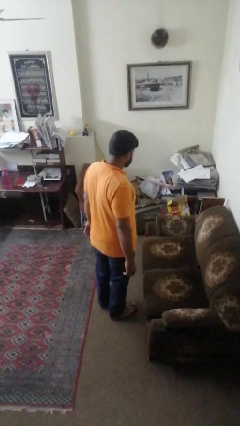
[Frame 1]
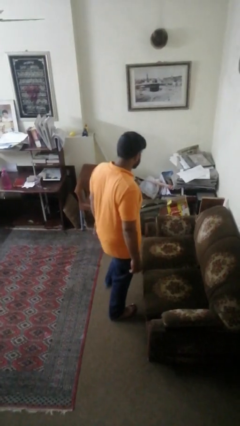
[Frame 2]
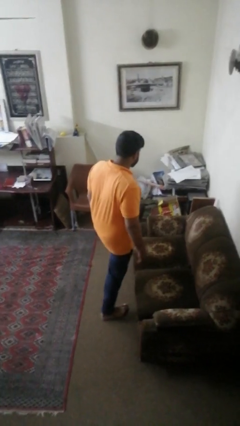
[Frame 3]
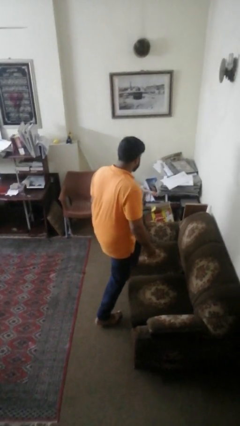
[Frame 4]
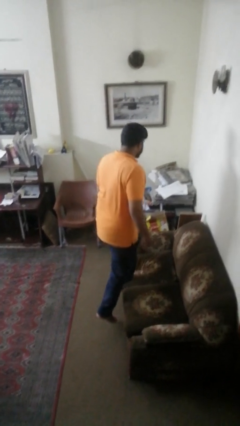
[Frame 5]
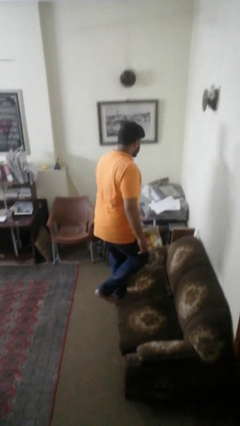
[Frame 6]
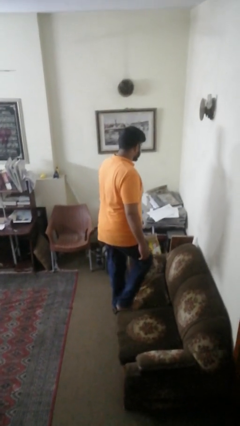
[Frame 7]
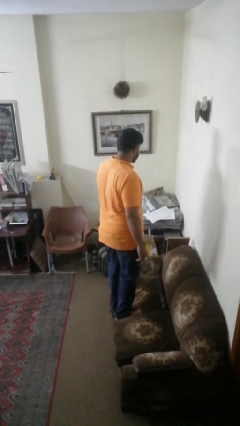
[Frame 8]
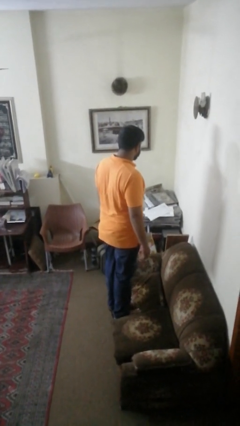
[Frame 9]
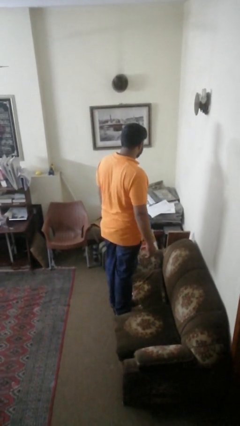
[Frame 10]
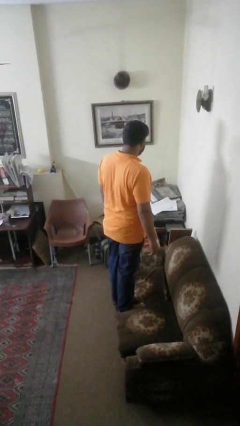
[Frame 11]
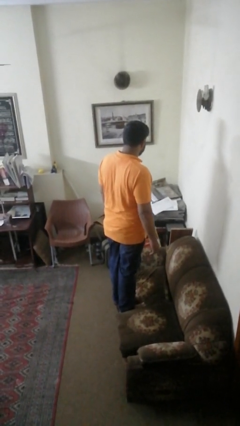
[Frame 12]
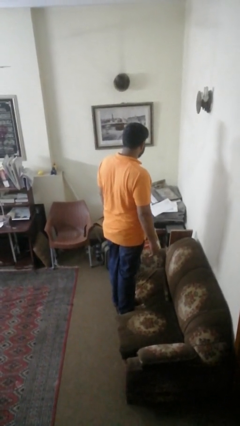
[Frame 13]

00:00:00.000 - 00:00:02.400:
person climbs on couch

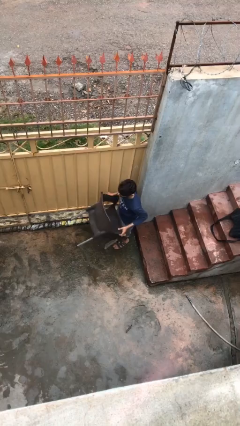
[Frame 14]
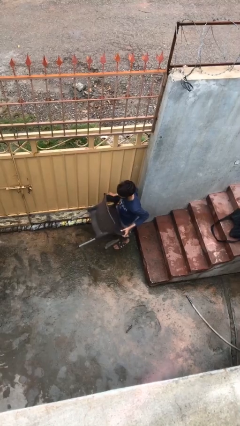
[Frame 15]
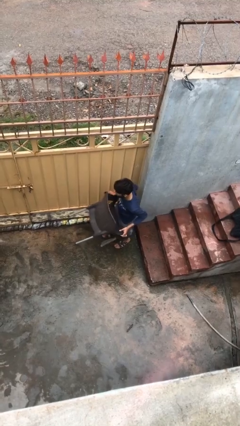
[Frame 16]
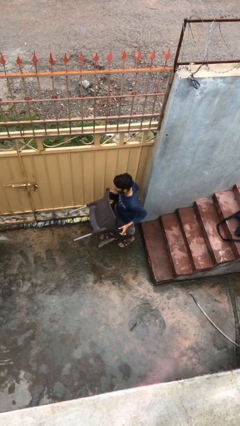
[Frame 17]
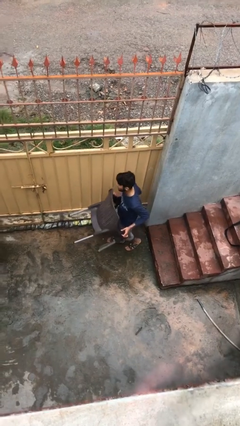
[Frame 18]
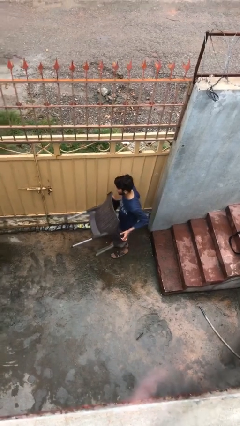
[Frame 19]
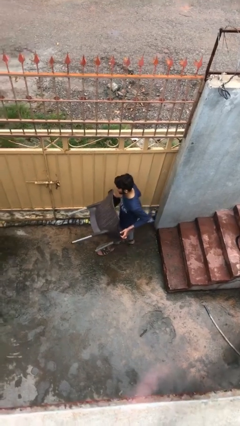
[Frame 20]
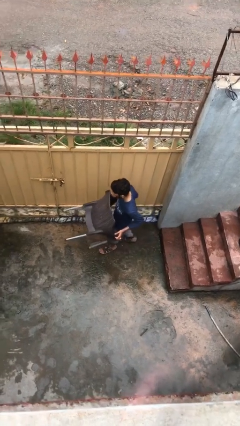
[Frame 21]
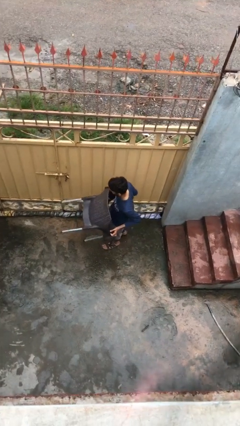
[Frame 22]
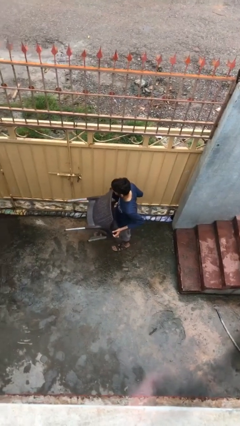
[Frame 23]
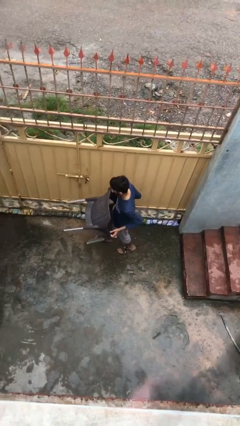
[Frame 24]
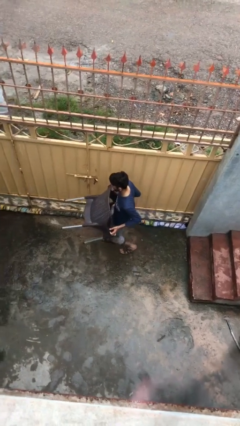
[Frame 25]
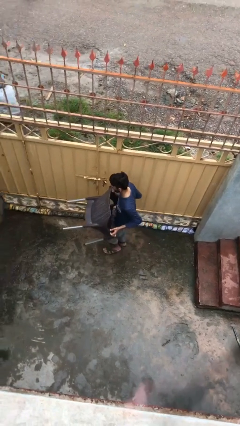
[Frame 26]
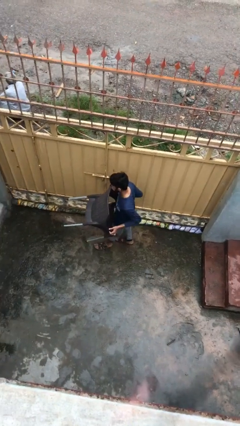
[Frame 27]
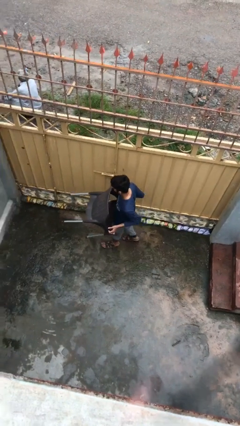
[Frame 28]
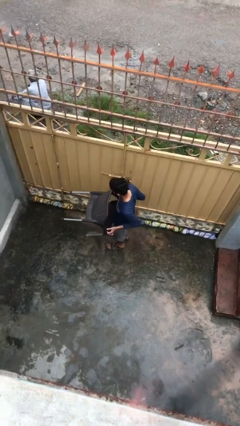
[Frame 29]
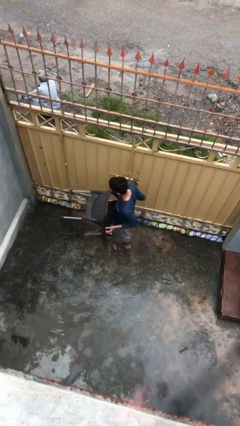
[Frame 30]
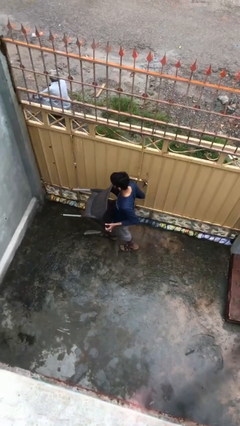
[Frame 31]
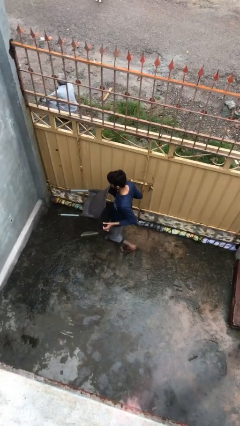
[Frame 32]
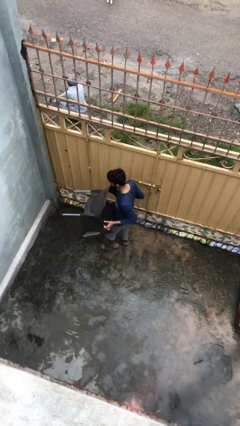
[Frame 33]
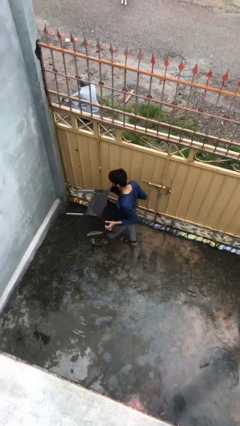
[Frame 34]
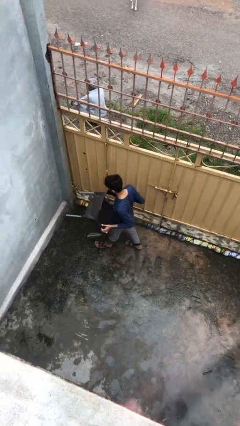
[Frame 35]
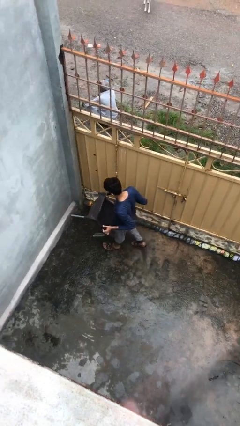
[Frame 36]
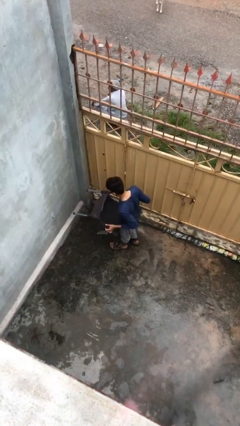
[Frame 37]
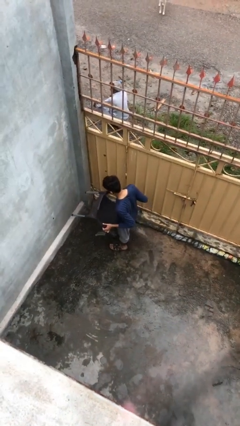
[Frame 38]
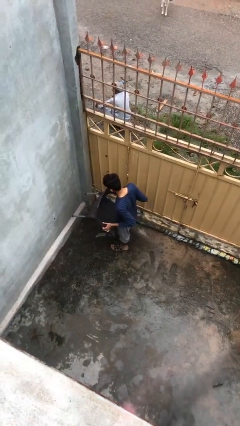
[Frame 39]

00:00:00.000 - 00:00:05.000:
person carries heavy object

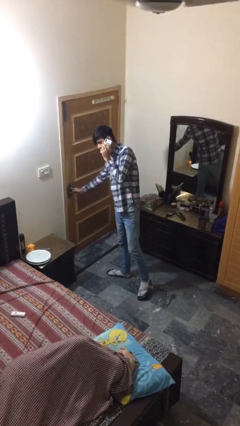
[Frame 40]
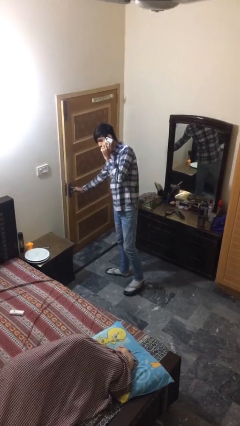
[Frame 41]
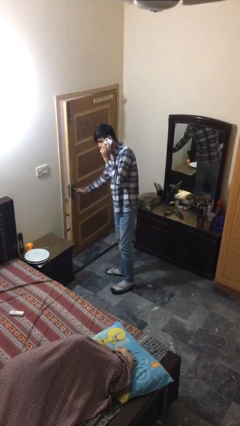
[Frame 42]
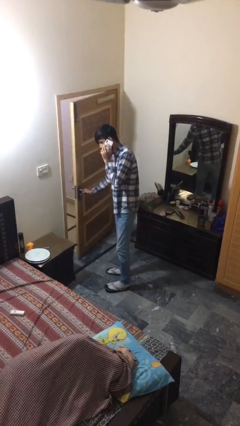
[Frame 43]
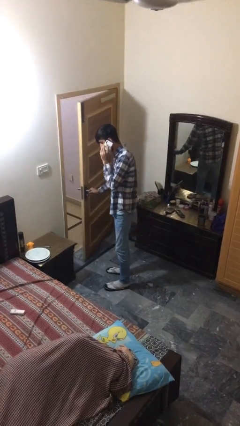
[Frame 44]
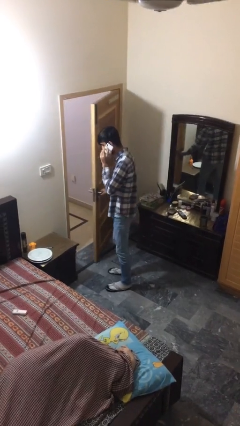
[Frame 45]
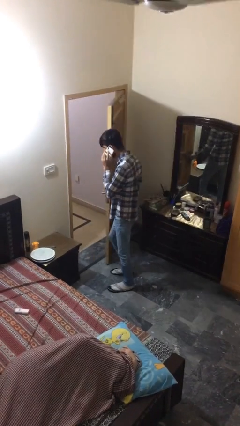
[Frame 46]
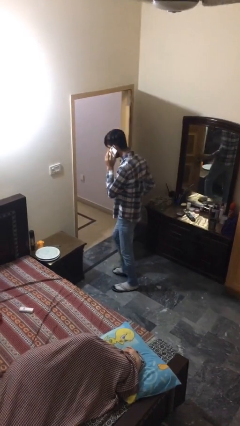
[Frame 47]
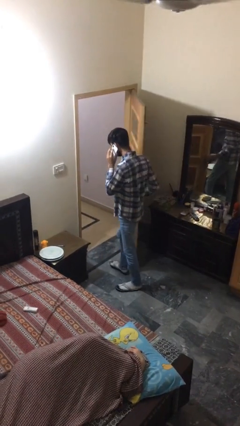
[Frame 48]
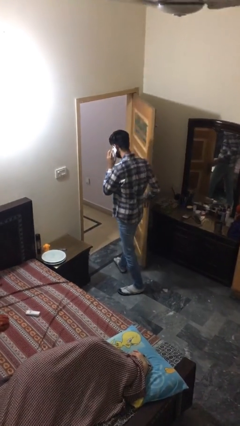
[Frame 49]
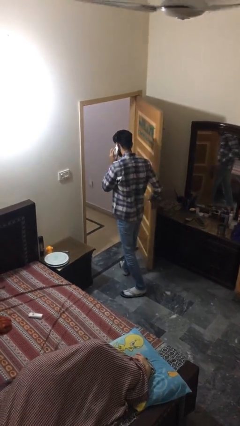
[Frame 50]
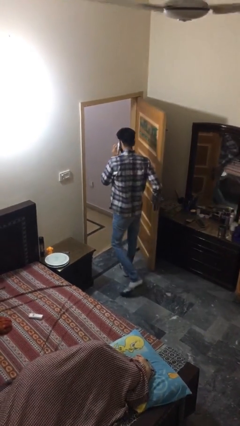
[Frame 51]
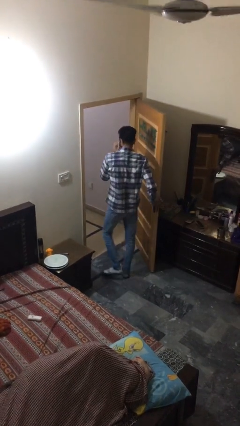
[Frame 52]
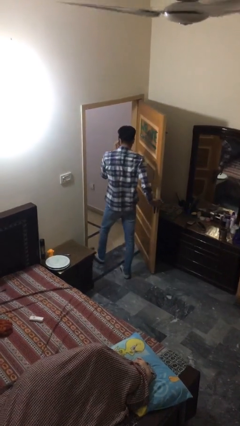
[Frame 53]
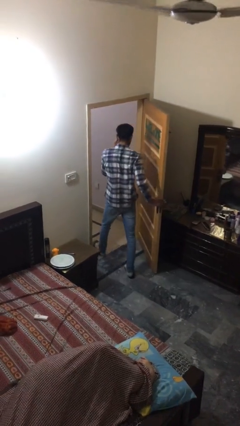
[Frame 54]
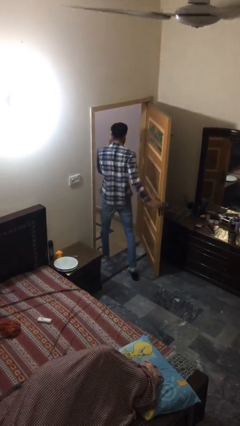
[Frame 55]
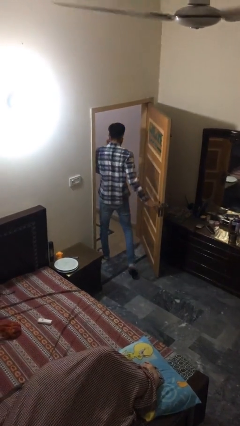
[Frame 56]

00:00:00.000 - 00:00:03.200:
person exits scene through structure

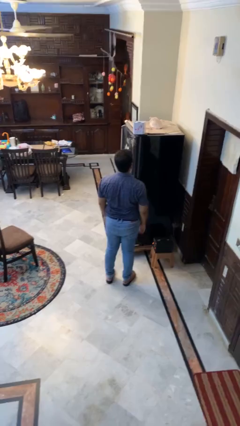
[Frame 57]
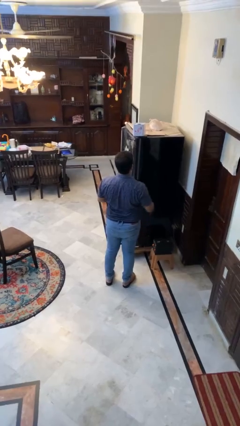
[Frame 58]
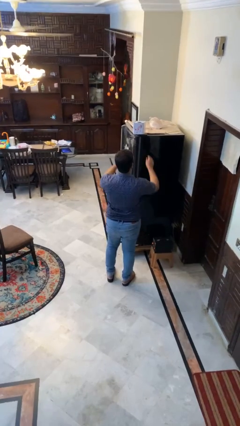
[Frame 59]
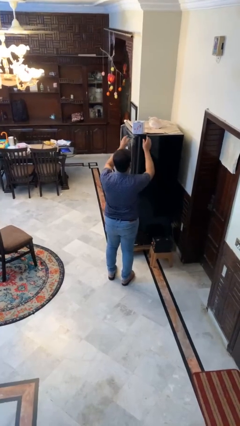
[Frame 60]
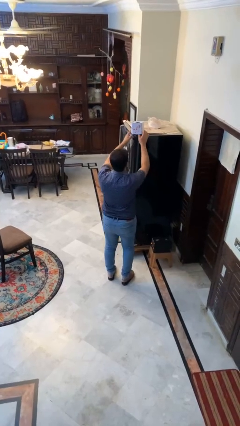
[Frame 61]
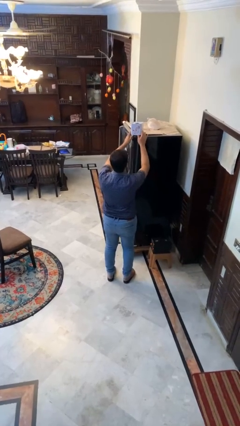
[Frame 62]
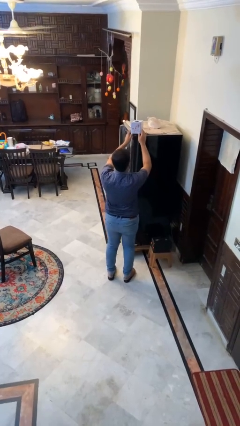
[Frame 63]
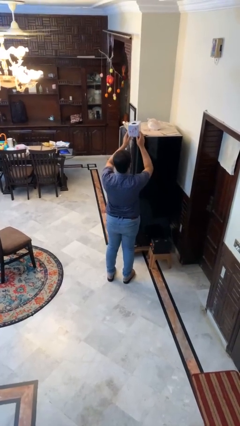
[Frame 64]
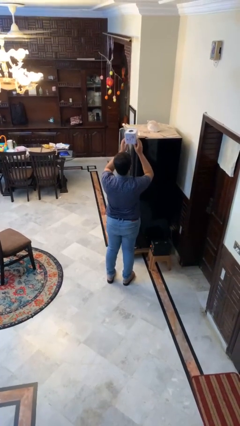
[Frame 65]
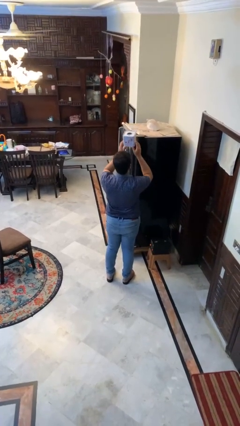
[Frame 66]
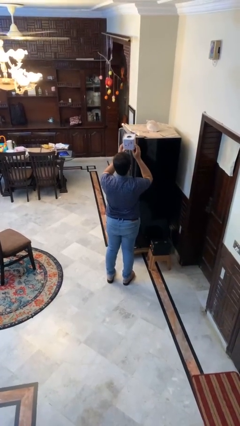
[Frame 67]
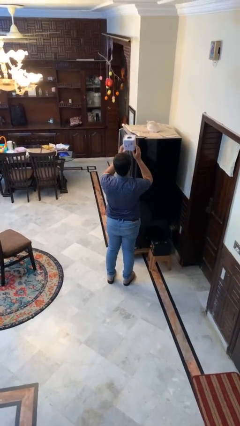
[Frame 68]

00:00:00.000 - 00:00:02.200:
person picks up object from shelf

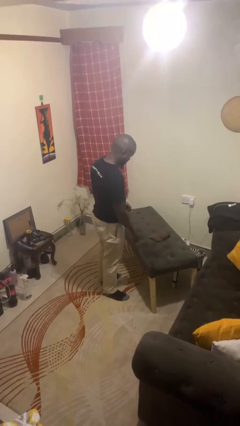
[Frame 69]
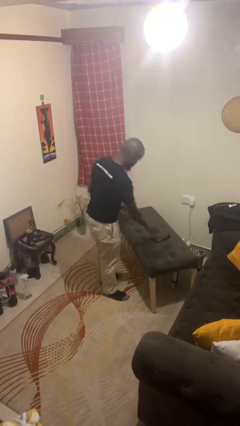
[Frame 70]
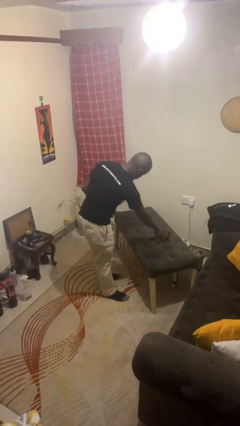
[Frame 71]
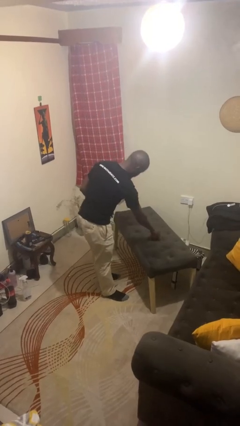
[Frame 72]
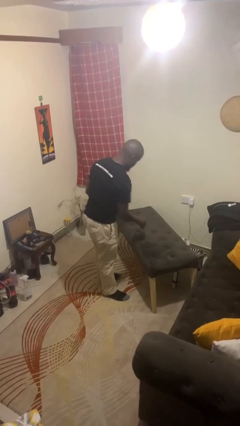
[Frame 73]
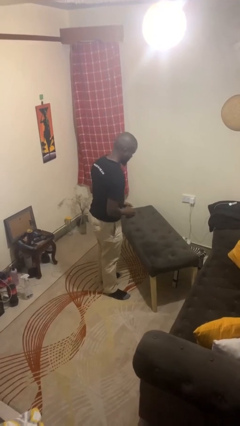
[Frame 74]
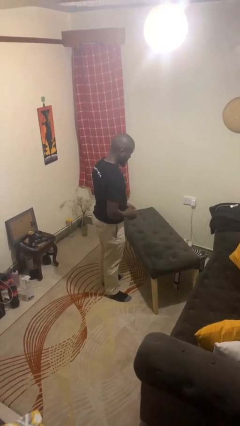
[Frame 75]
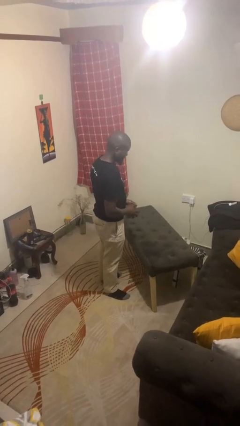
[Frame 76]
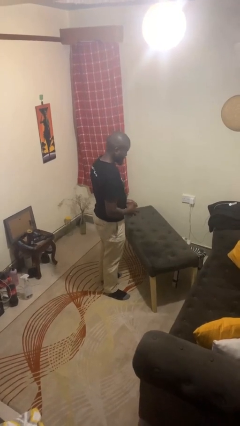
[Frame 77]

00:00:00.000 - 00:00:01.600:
person picks up object from table

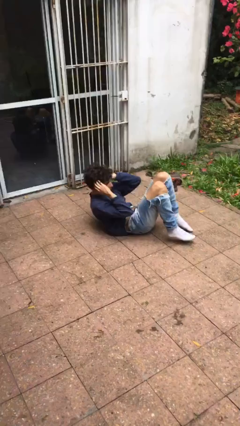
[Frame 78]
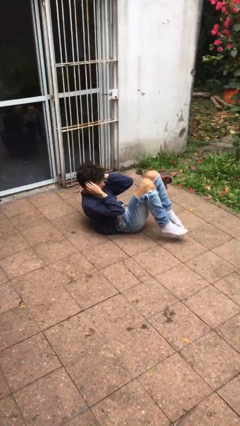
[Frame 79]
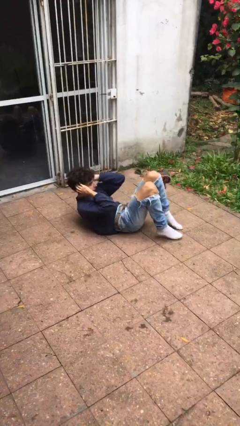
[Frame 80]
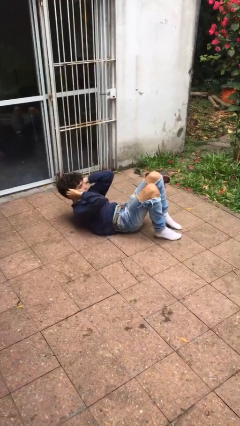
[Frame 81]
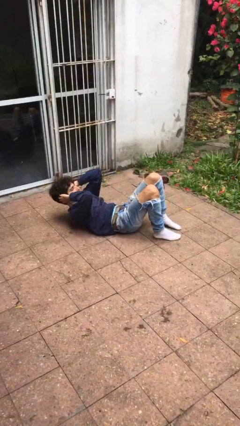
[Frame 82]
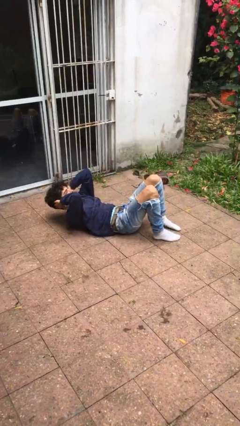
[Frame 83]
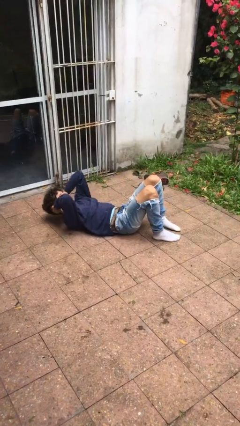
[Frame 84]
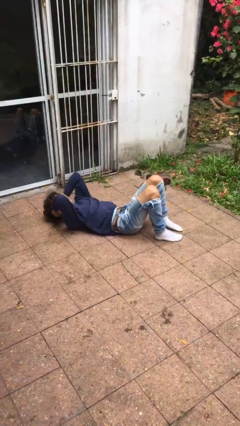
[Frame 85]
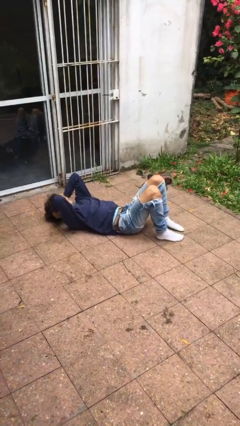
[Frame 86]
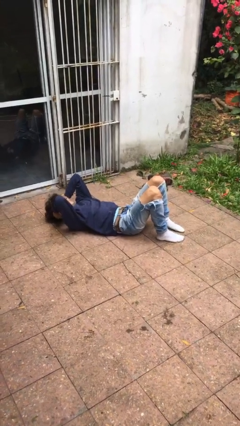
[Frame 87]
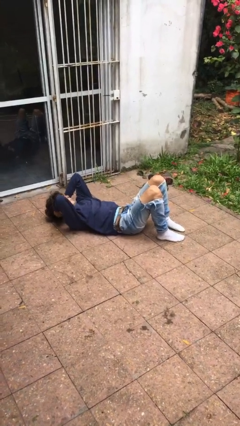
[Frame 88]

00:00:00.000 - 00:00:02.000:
person exercises with situp

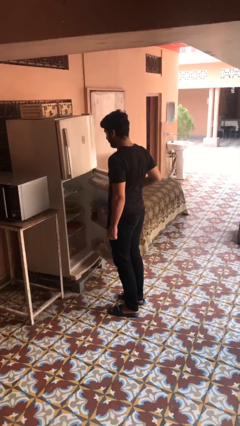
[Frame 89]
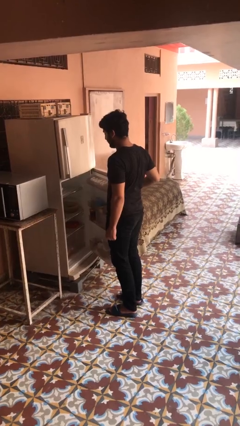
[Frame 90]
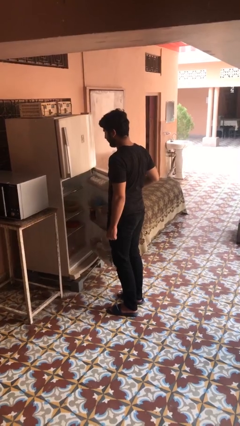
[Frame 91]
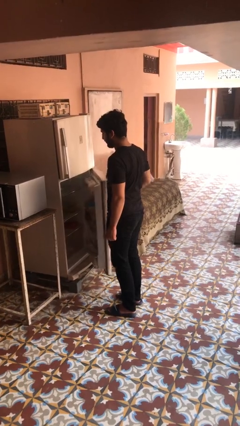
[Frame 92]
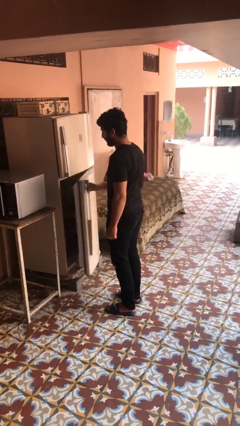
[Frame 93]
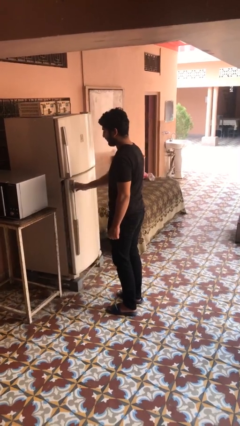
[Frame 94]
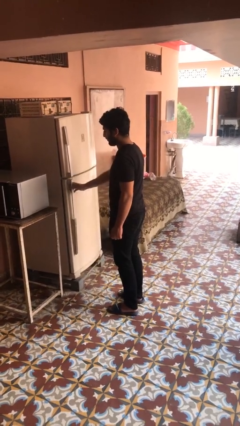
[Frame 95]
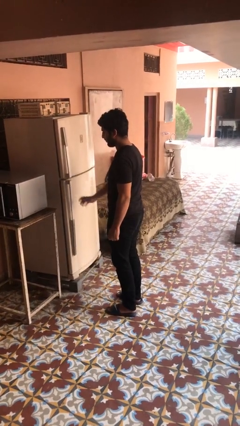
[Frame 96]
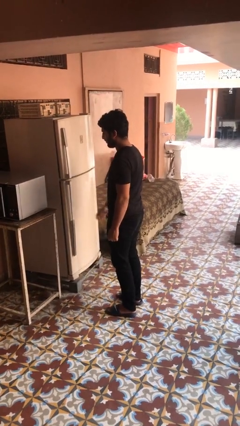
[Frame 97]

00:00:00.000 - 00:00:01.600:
person closes refrigerator
